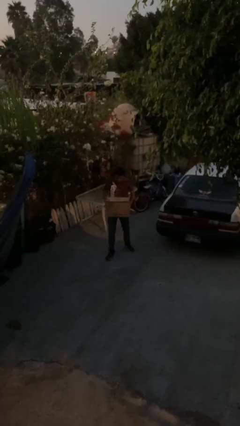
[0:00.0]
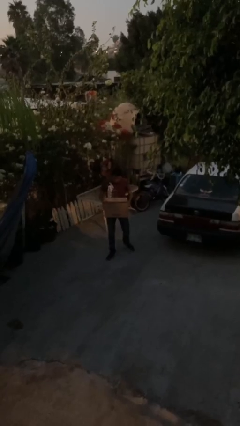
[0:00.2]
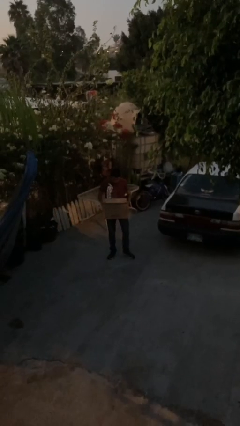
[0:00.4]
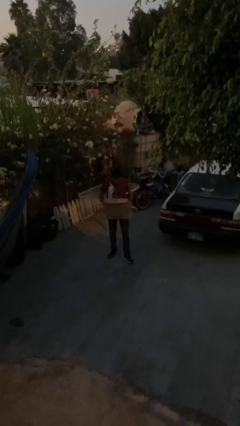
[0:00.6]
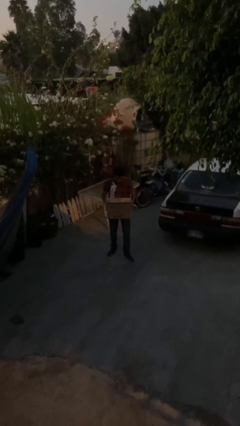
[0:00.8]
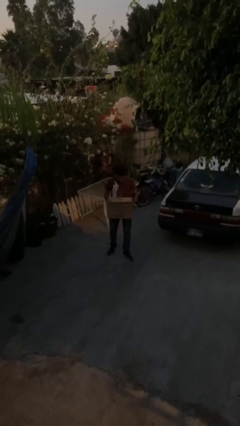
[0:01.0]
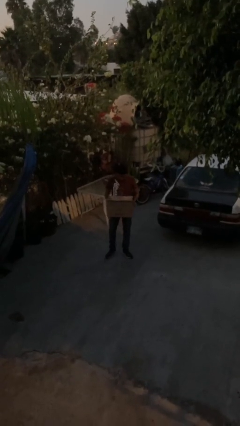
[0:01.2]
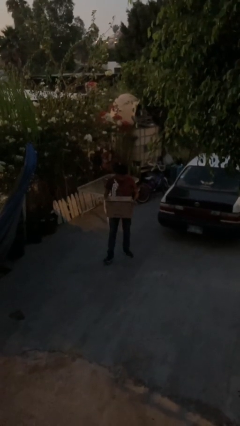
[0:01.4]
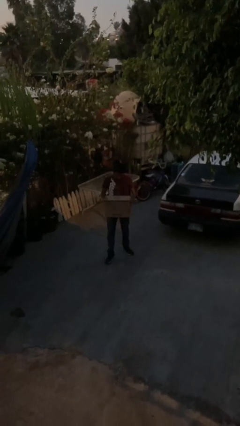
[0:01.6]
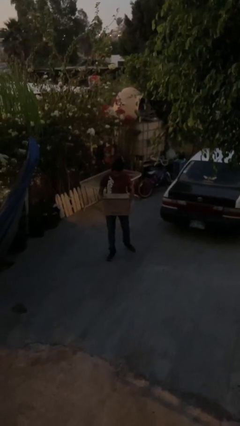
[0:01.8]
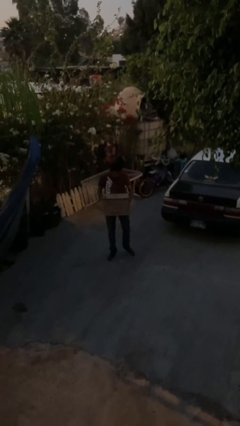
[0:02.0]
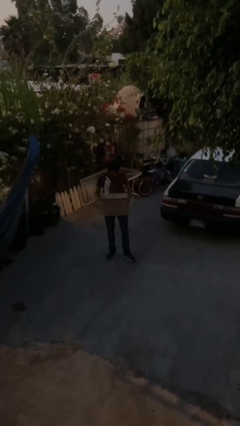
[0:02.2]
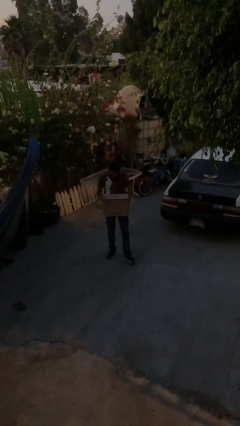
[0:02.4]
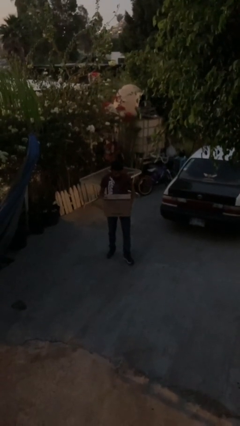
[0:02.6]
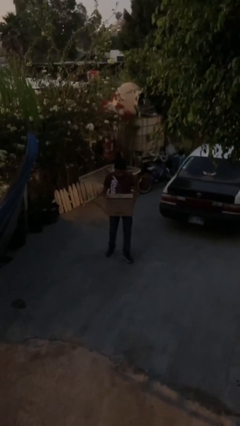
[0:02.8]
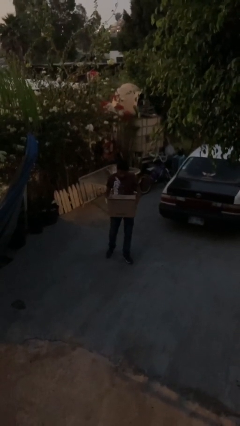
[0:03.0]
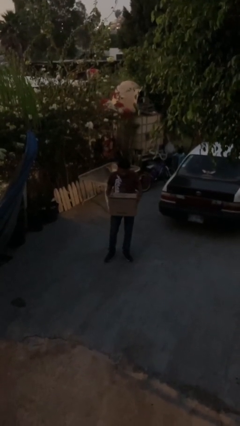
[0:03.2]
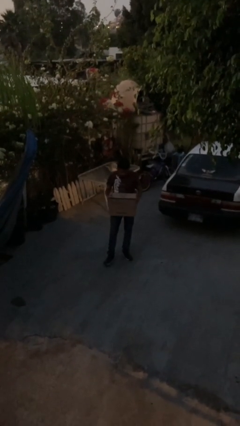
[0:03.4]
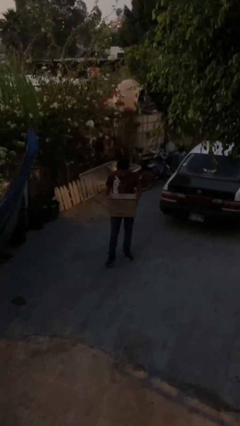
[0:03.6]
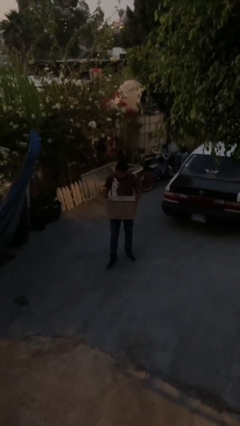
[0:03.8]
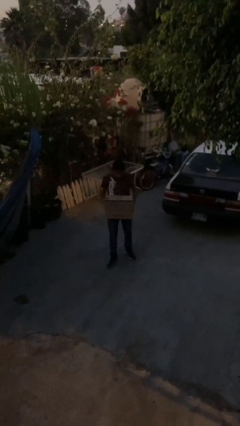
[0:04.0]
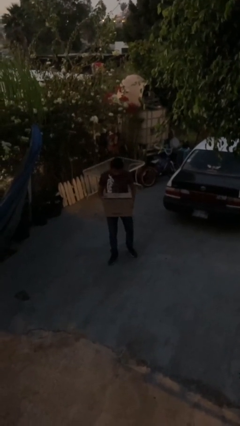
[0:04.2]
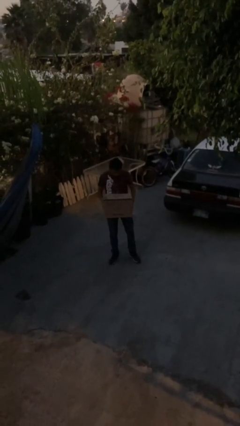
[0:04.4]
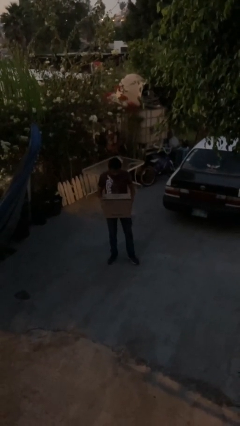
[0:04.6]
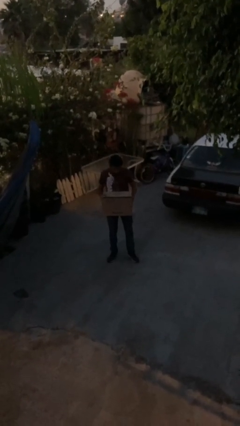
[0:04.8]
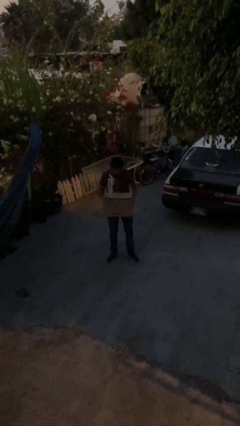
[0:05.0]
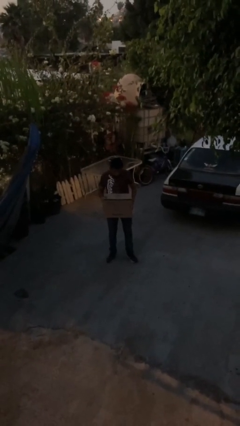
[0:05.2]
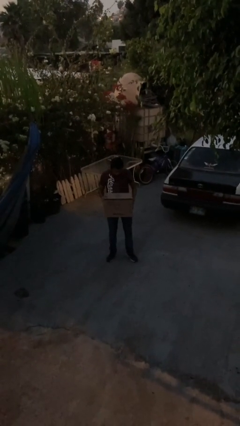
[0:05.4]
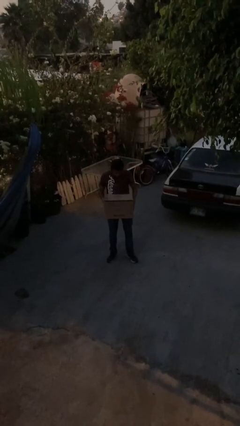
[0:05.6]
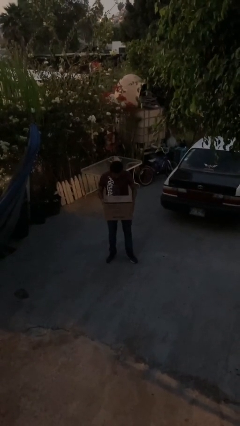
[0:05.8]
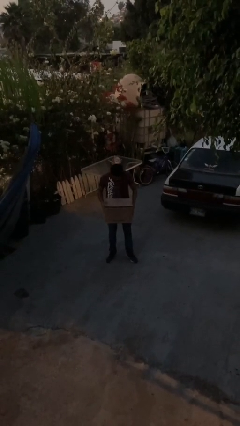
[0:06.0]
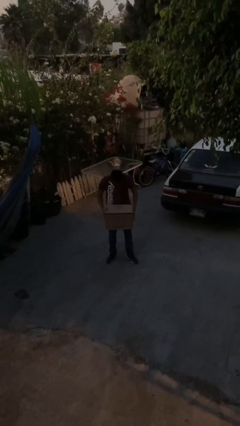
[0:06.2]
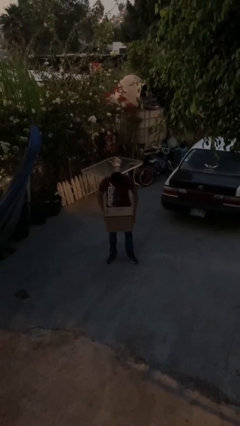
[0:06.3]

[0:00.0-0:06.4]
person carries heavy object

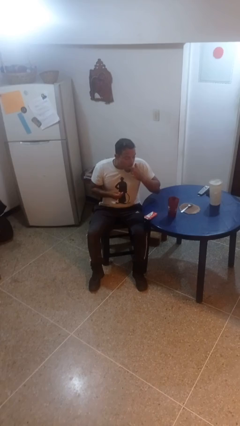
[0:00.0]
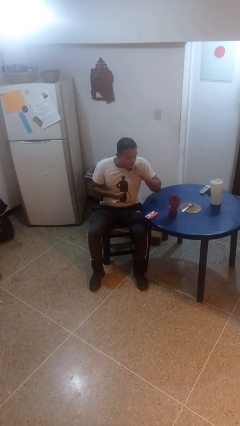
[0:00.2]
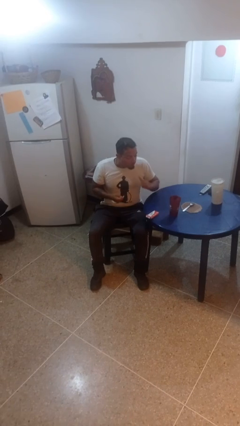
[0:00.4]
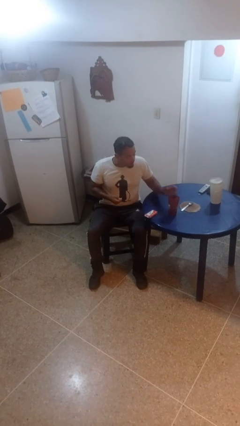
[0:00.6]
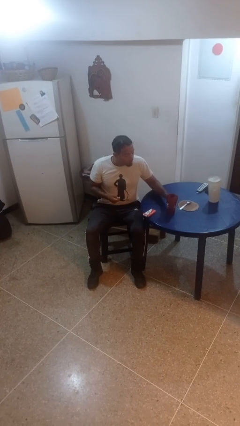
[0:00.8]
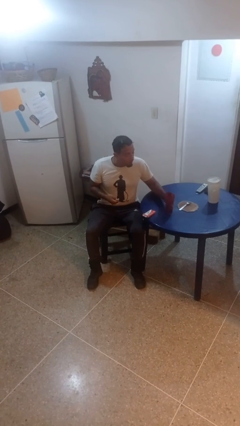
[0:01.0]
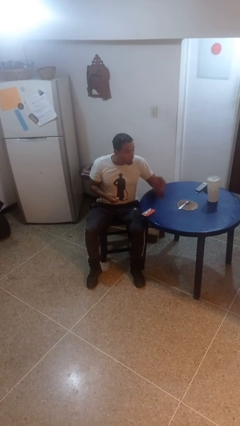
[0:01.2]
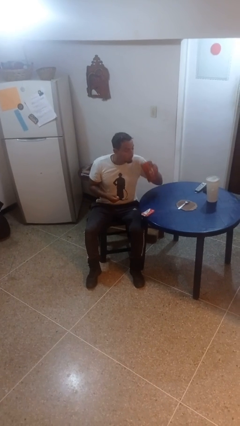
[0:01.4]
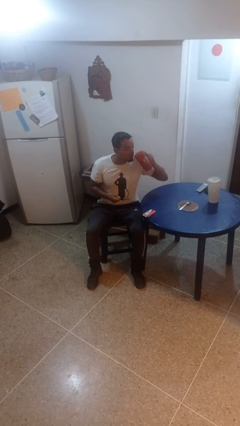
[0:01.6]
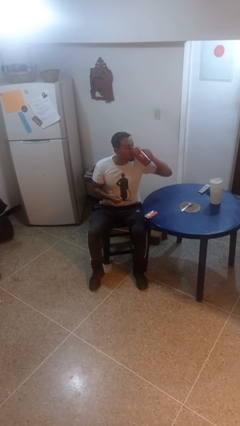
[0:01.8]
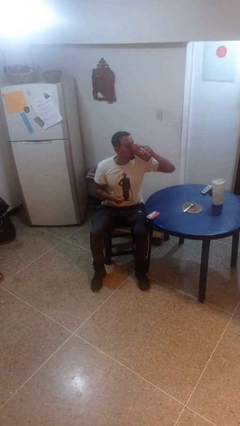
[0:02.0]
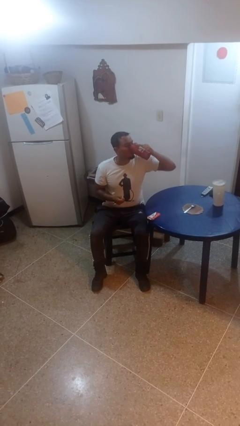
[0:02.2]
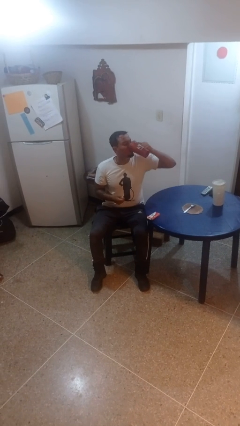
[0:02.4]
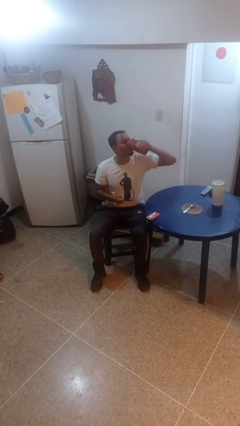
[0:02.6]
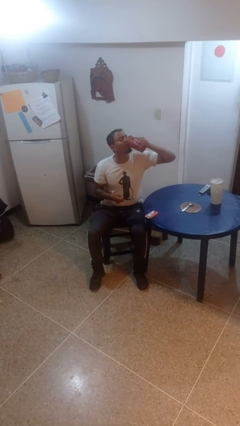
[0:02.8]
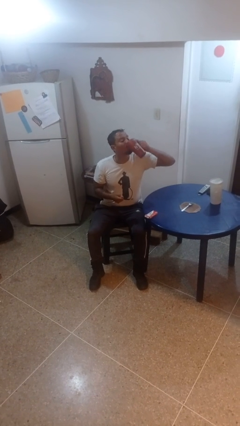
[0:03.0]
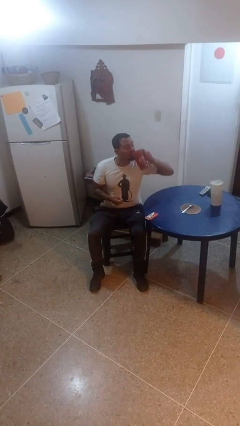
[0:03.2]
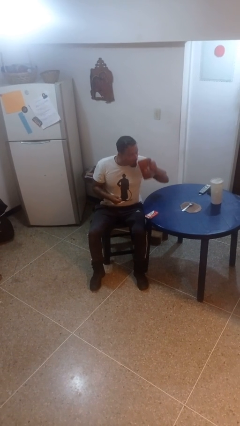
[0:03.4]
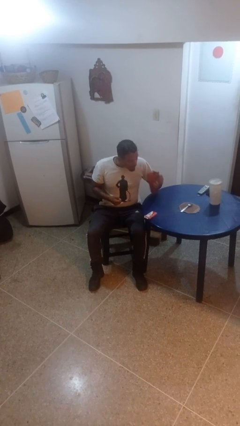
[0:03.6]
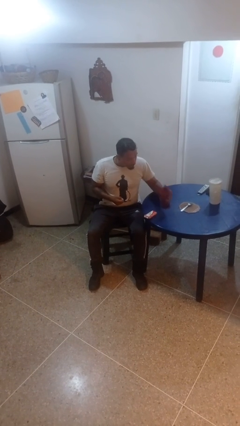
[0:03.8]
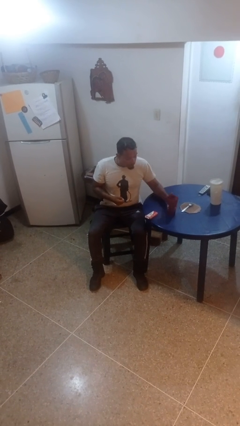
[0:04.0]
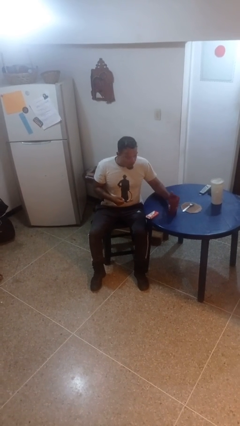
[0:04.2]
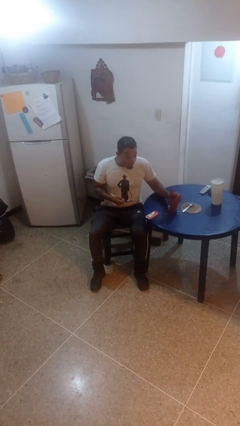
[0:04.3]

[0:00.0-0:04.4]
person drinks from cup

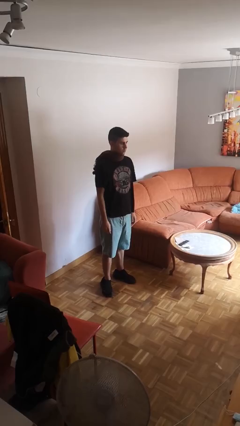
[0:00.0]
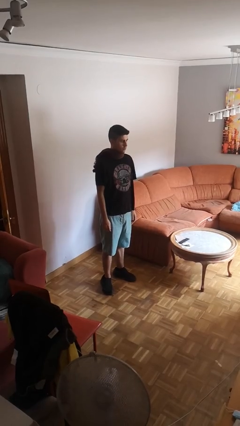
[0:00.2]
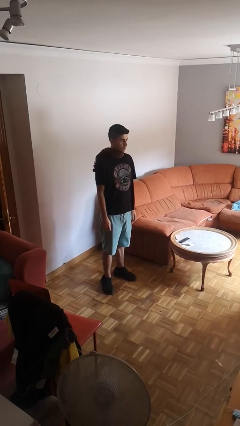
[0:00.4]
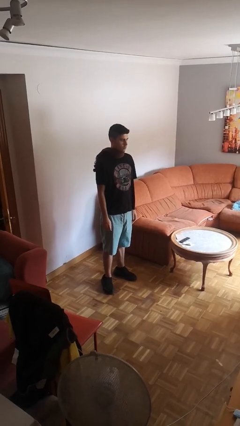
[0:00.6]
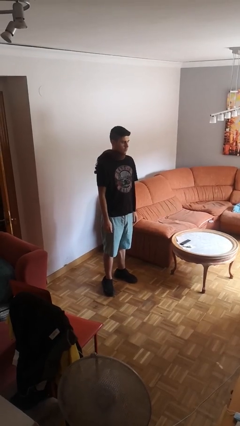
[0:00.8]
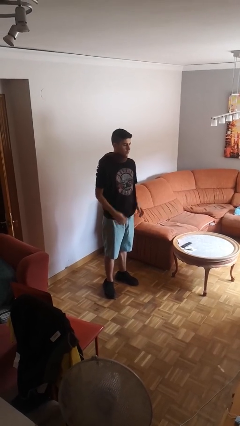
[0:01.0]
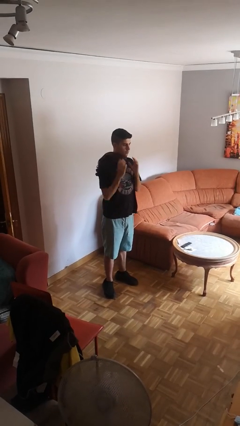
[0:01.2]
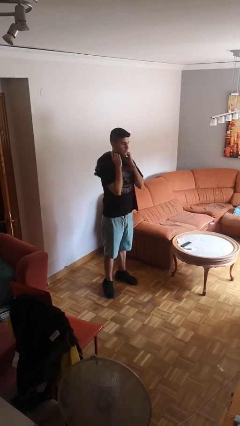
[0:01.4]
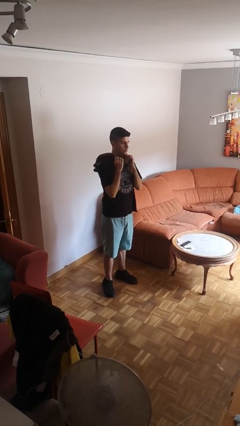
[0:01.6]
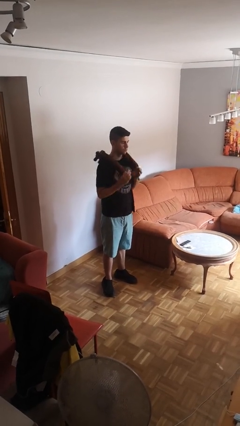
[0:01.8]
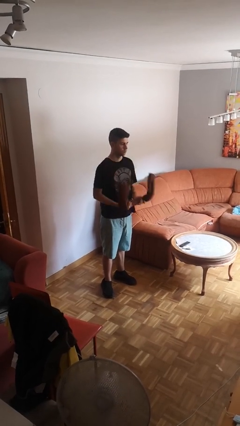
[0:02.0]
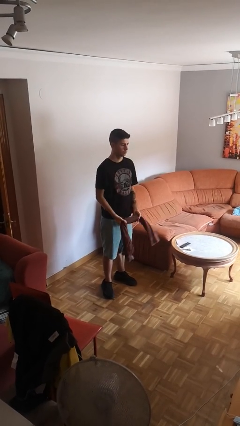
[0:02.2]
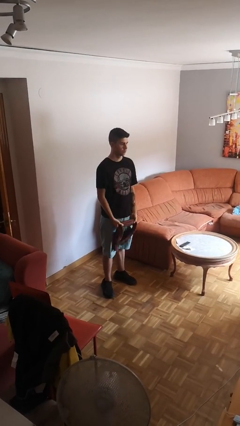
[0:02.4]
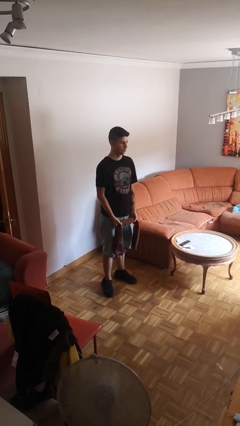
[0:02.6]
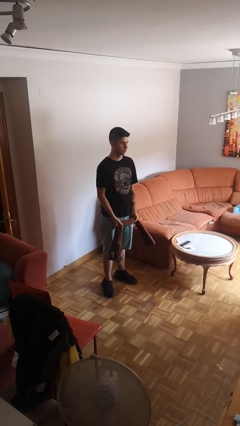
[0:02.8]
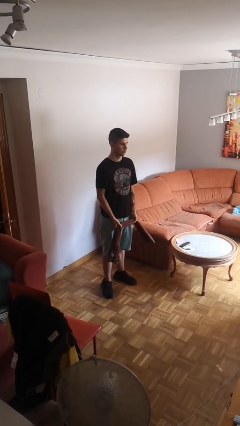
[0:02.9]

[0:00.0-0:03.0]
person takes off scarf

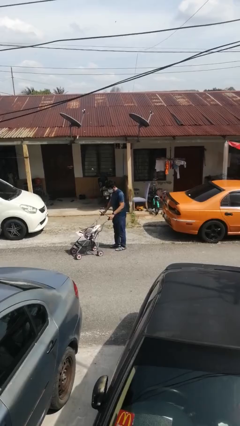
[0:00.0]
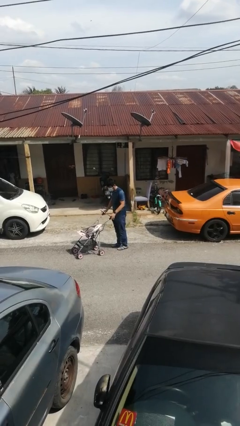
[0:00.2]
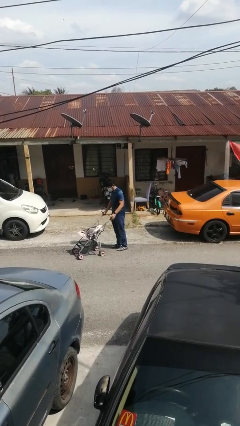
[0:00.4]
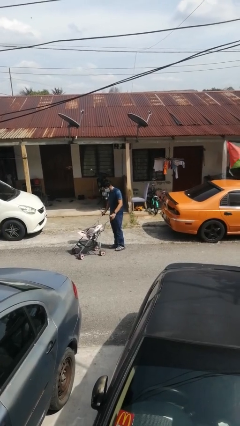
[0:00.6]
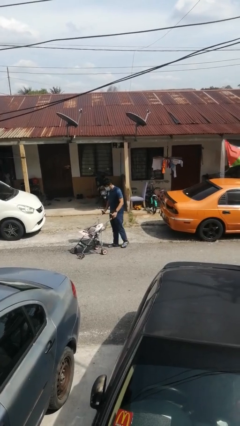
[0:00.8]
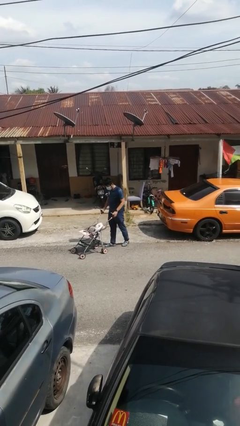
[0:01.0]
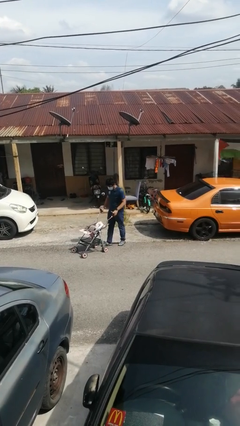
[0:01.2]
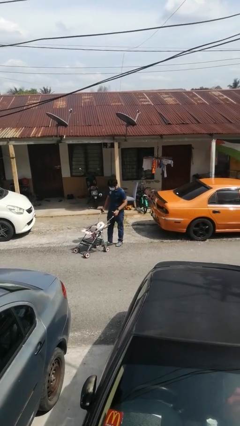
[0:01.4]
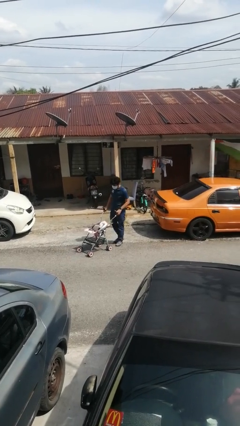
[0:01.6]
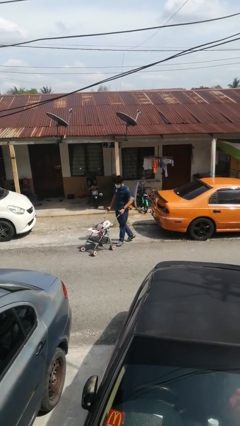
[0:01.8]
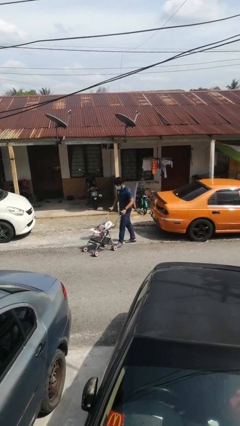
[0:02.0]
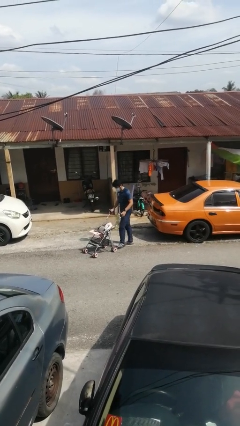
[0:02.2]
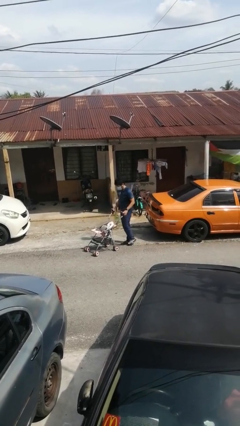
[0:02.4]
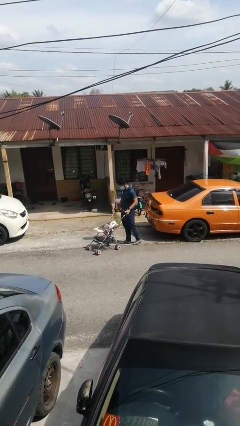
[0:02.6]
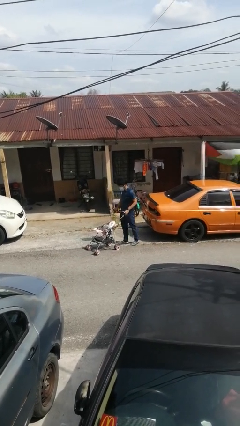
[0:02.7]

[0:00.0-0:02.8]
person pulls wheeled cart

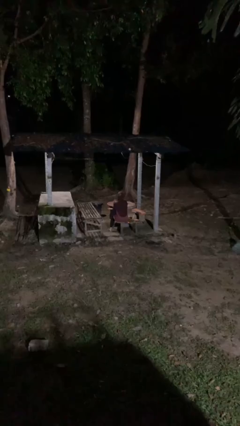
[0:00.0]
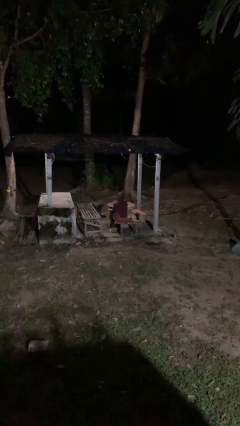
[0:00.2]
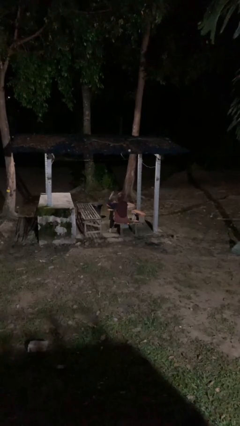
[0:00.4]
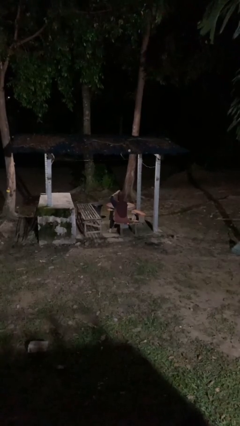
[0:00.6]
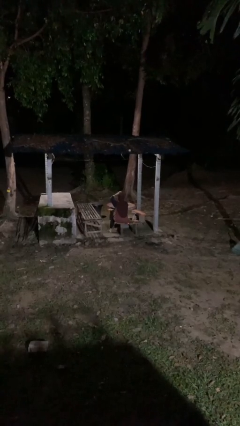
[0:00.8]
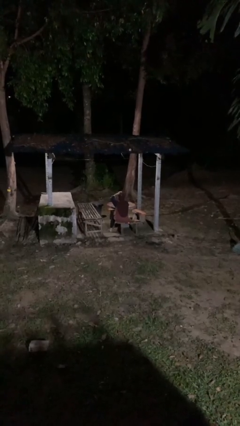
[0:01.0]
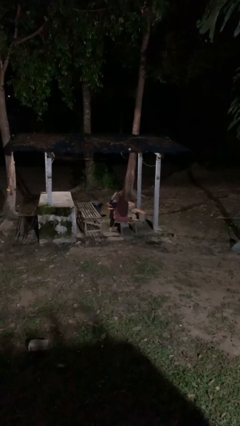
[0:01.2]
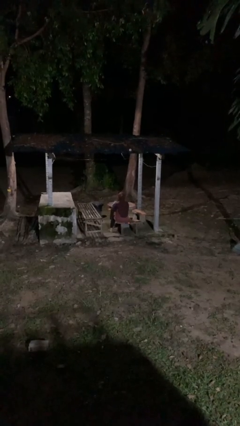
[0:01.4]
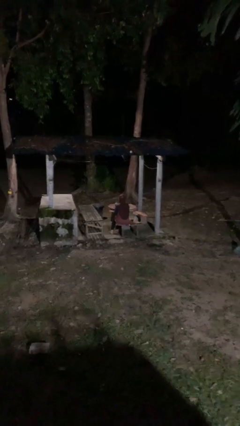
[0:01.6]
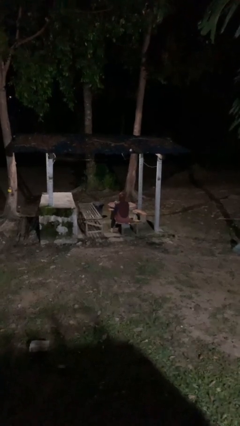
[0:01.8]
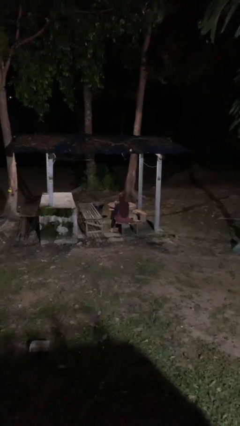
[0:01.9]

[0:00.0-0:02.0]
person pats head
